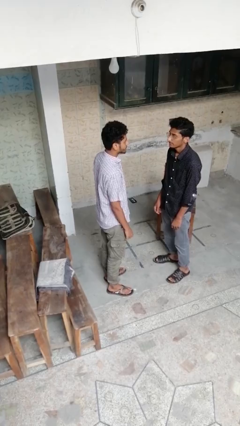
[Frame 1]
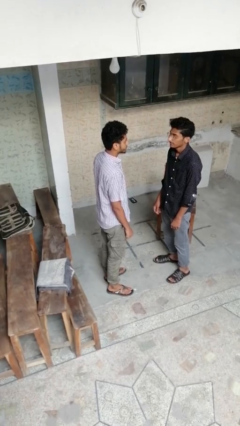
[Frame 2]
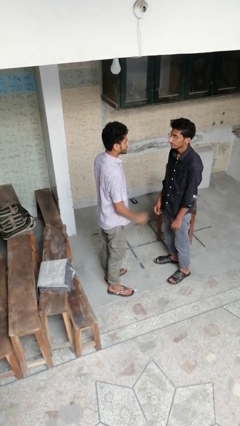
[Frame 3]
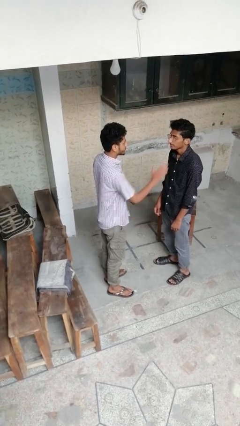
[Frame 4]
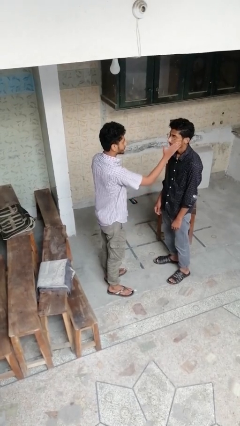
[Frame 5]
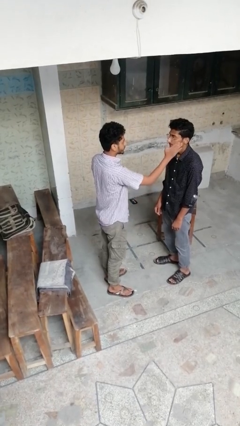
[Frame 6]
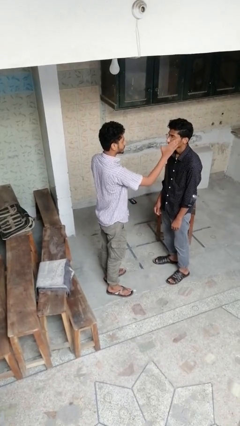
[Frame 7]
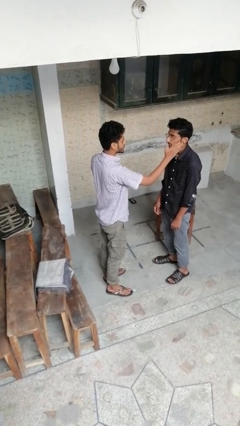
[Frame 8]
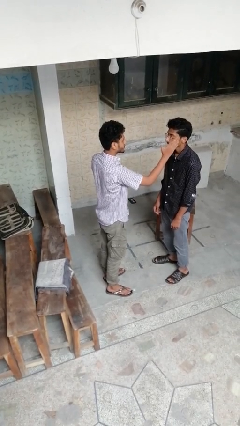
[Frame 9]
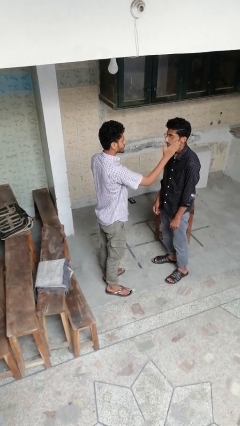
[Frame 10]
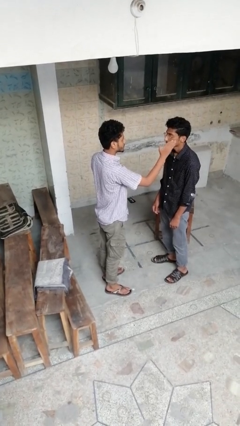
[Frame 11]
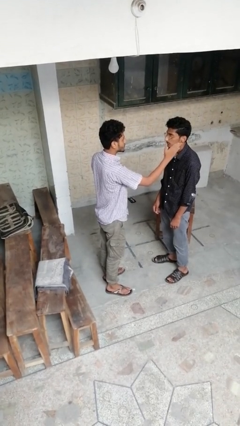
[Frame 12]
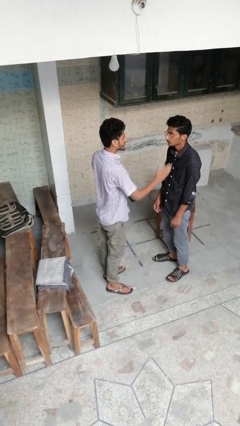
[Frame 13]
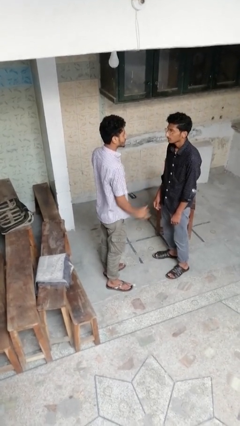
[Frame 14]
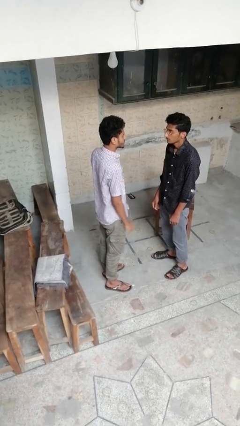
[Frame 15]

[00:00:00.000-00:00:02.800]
person touches face of person

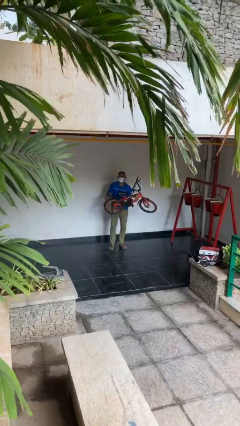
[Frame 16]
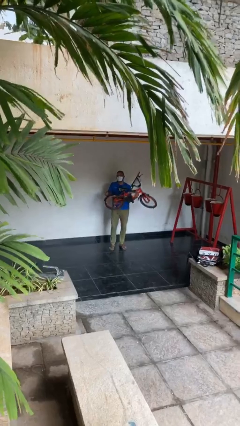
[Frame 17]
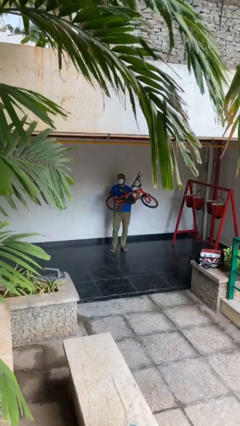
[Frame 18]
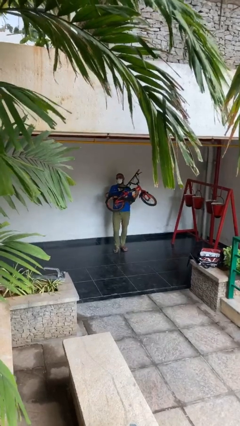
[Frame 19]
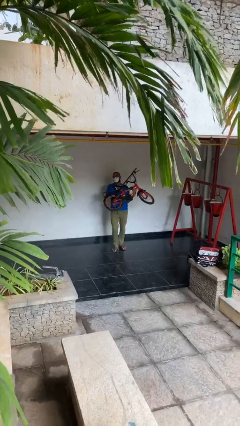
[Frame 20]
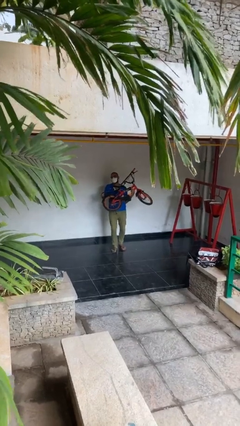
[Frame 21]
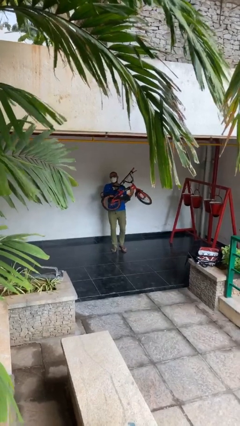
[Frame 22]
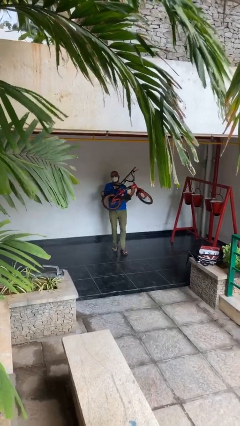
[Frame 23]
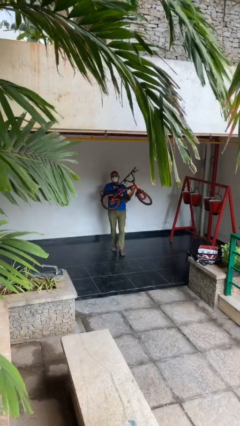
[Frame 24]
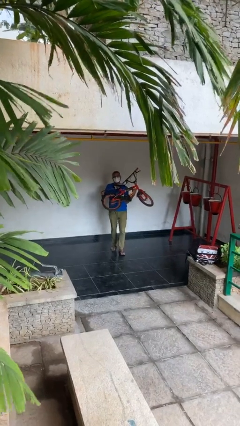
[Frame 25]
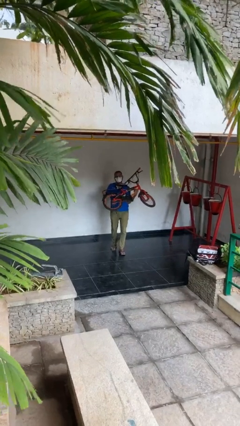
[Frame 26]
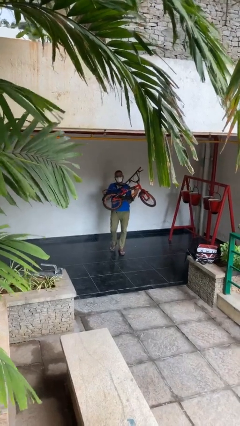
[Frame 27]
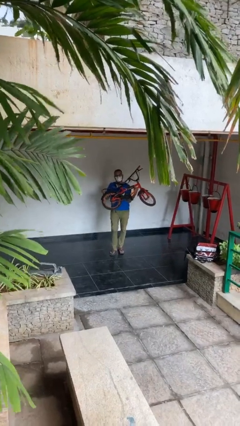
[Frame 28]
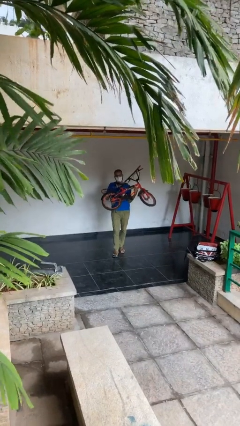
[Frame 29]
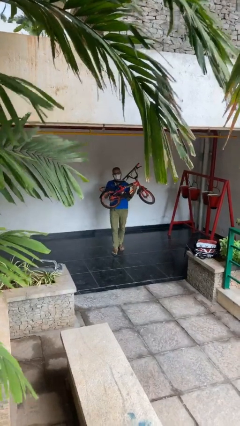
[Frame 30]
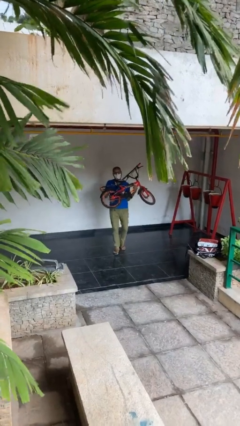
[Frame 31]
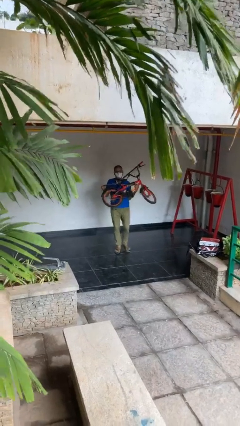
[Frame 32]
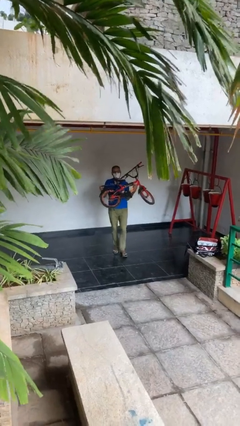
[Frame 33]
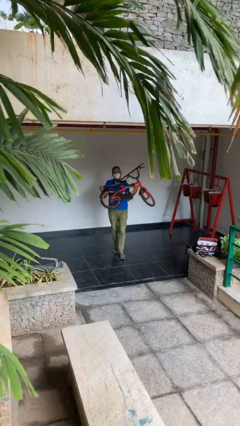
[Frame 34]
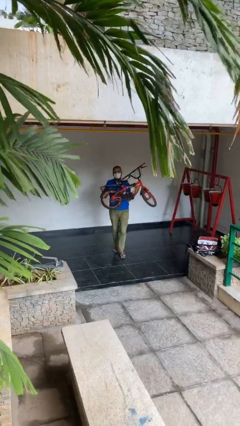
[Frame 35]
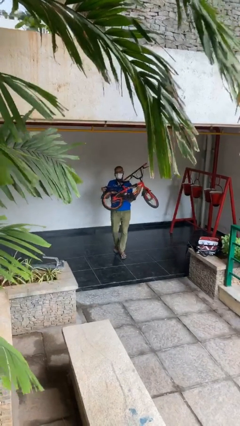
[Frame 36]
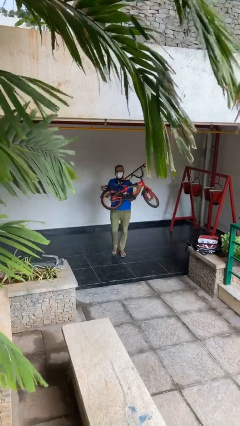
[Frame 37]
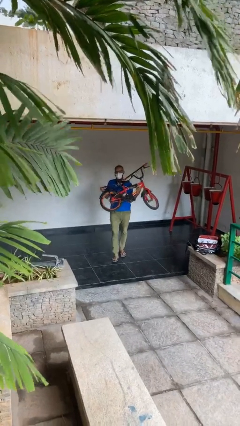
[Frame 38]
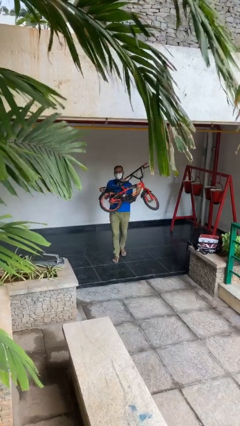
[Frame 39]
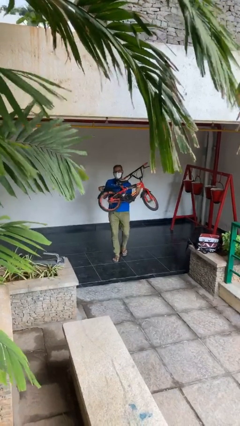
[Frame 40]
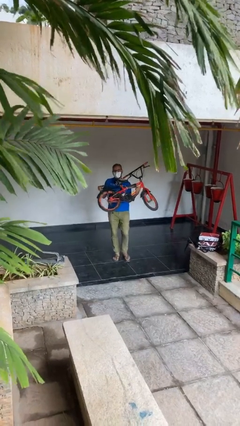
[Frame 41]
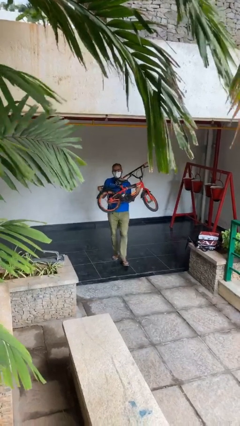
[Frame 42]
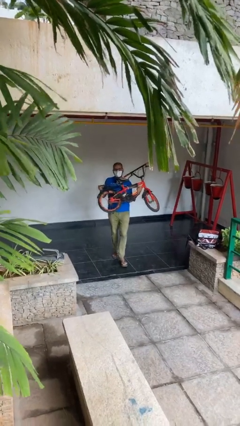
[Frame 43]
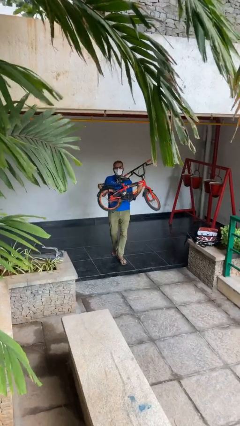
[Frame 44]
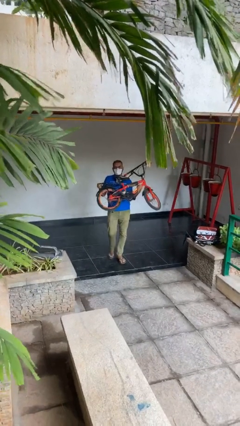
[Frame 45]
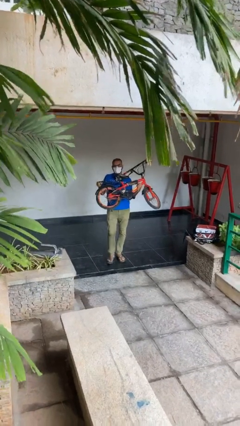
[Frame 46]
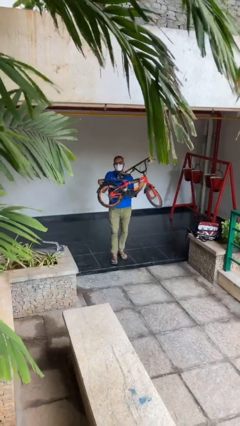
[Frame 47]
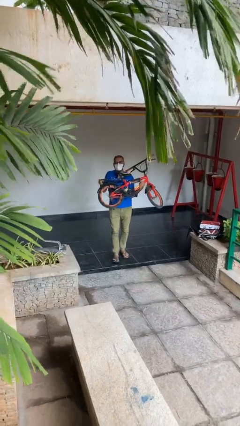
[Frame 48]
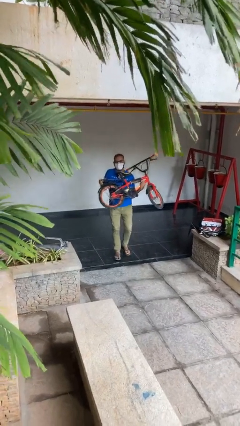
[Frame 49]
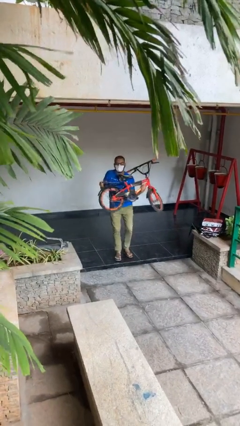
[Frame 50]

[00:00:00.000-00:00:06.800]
person carries heavy object

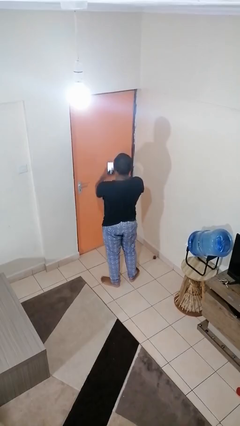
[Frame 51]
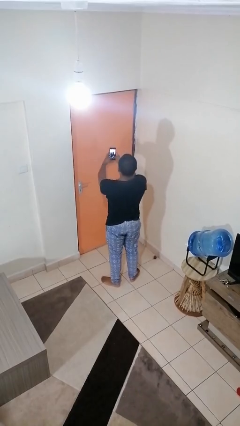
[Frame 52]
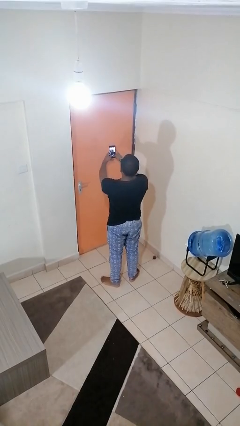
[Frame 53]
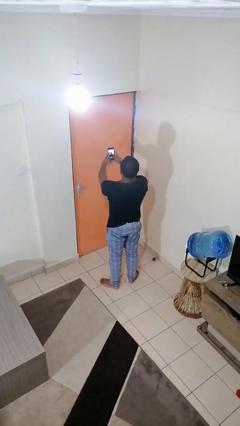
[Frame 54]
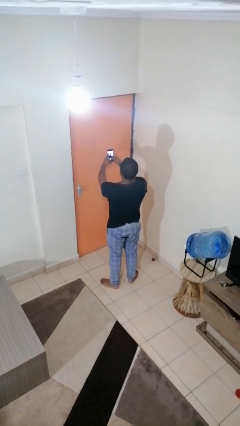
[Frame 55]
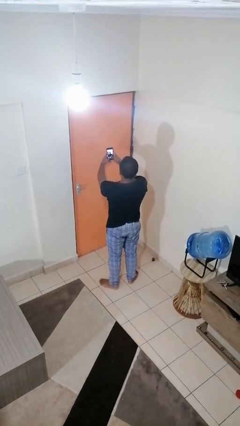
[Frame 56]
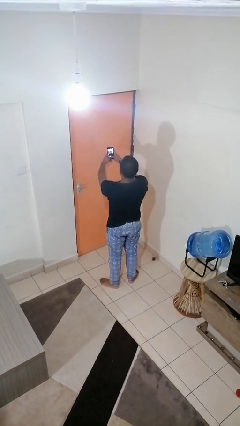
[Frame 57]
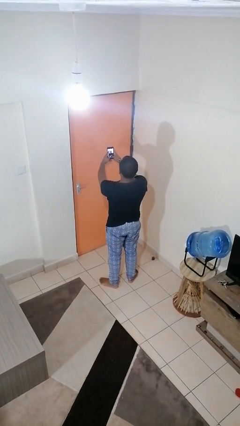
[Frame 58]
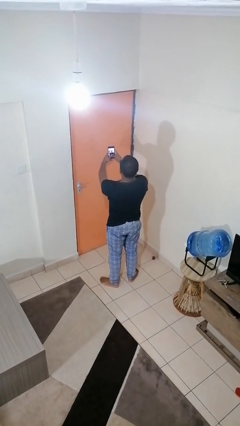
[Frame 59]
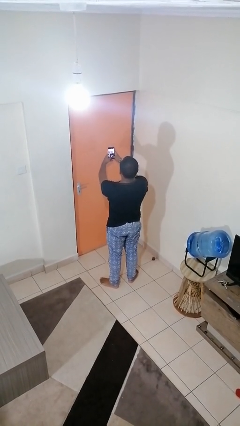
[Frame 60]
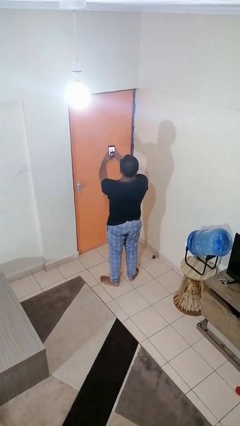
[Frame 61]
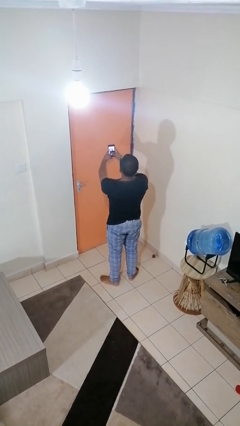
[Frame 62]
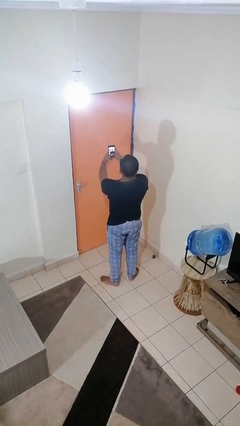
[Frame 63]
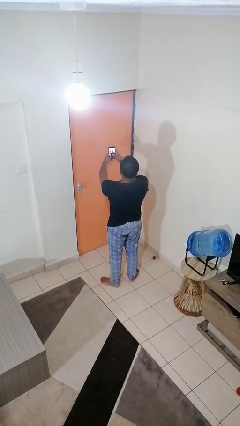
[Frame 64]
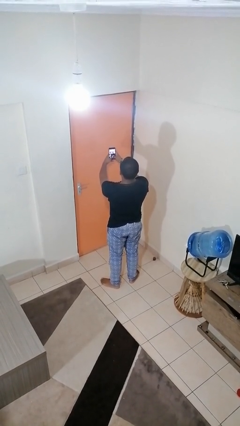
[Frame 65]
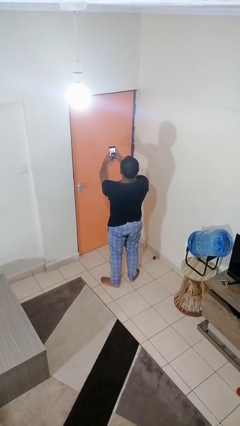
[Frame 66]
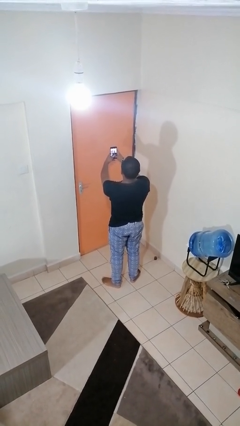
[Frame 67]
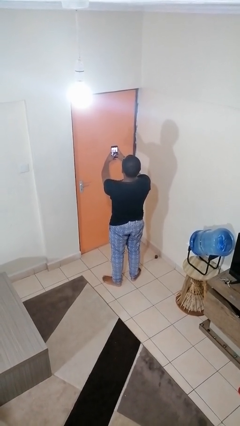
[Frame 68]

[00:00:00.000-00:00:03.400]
person takes selfie

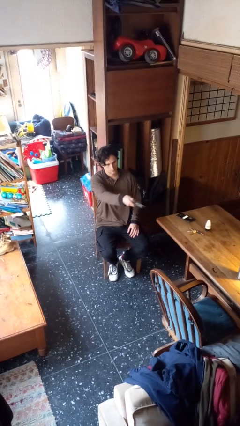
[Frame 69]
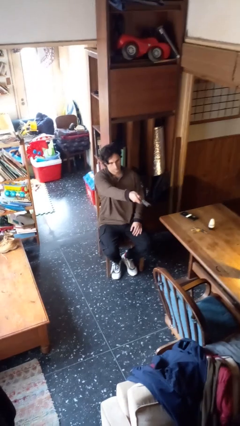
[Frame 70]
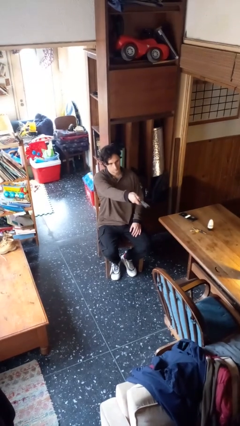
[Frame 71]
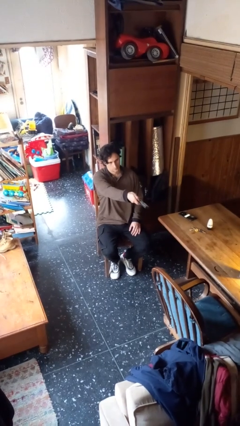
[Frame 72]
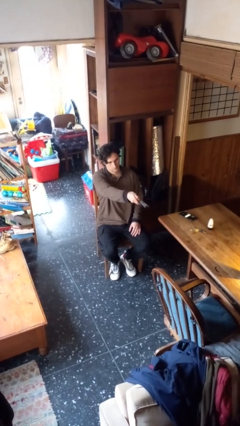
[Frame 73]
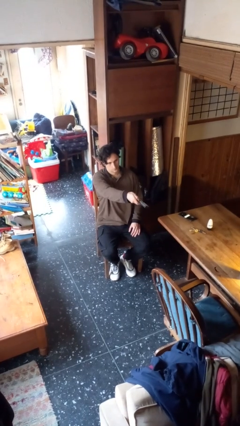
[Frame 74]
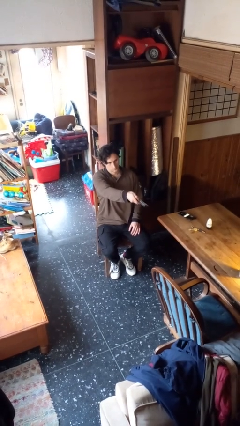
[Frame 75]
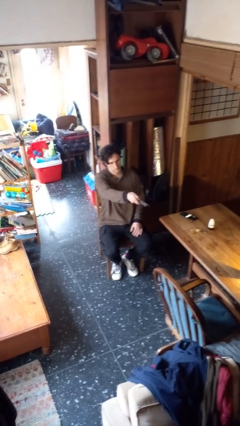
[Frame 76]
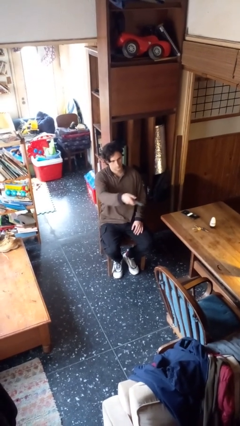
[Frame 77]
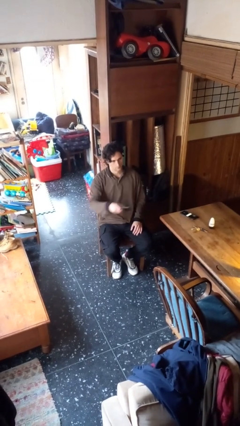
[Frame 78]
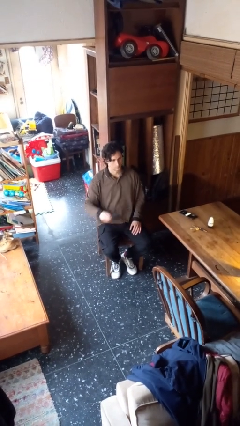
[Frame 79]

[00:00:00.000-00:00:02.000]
person uses television remote

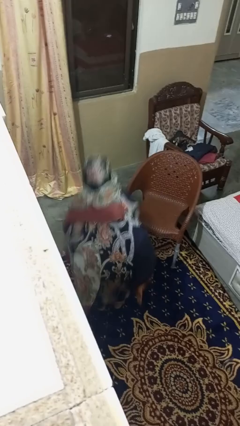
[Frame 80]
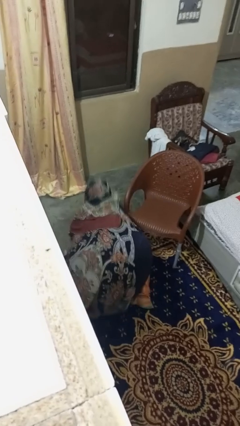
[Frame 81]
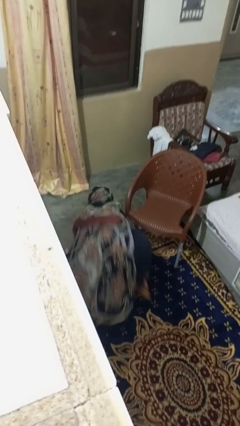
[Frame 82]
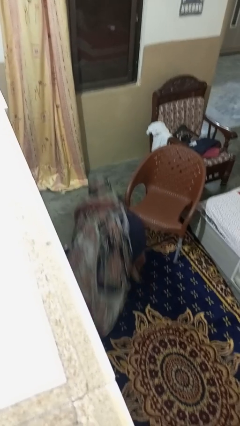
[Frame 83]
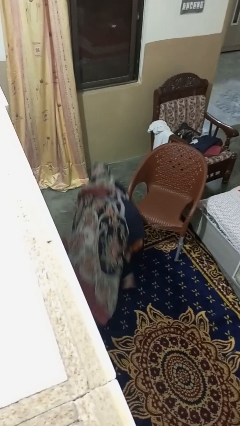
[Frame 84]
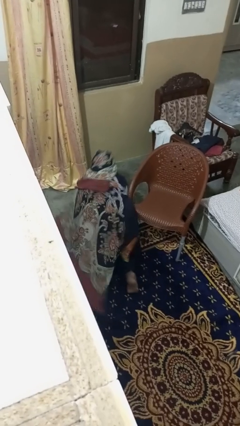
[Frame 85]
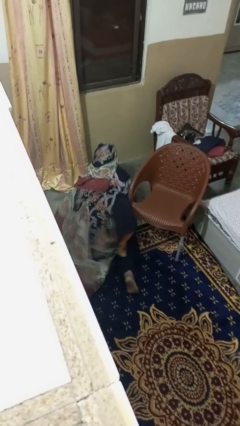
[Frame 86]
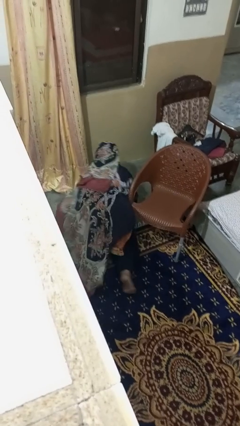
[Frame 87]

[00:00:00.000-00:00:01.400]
person lies down on floor

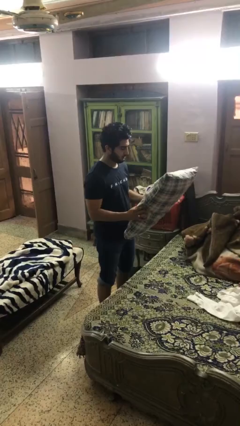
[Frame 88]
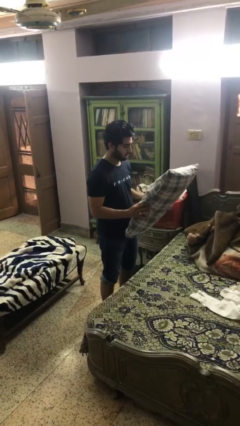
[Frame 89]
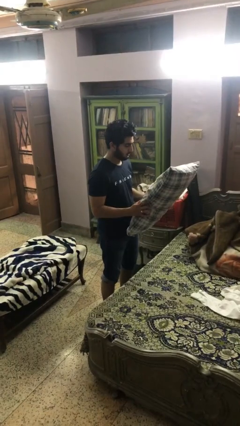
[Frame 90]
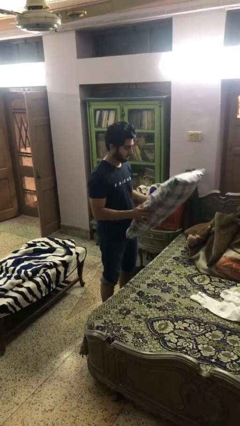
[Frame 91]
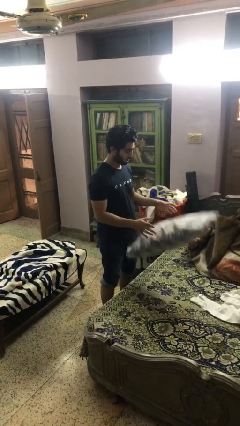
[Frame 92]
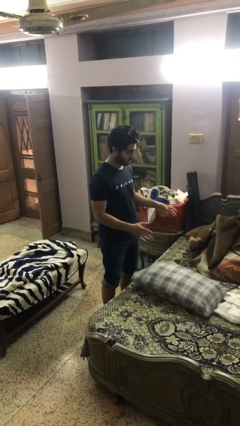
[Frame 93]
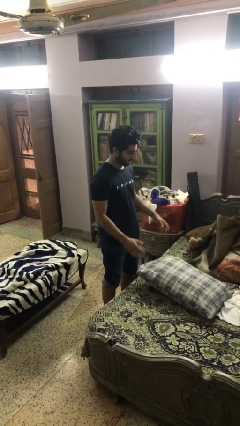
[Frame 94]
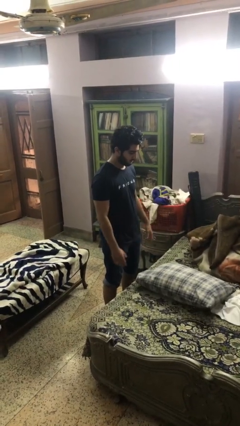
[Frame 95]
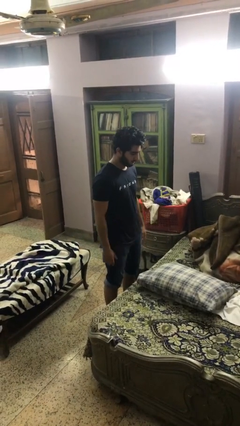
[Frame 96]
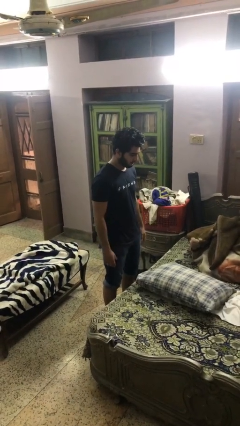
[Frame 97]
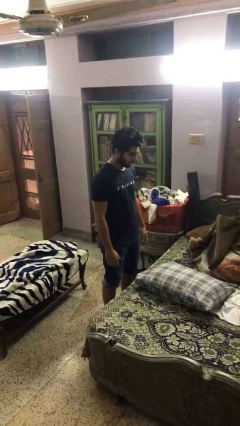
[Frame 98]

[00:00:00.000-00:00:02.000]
person puts down object on bed
